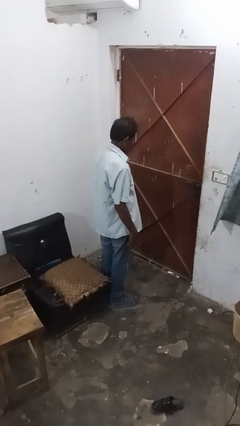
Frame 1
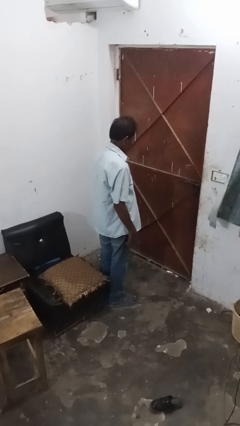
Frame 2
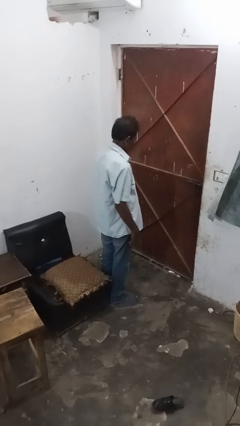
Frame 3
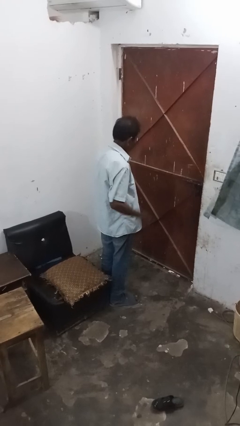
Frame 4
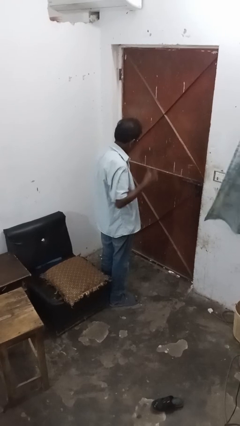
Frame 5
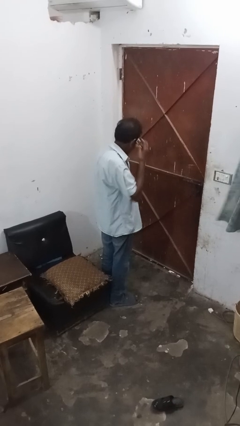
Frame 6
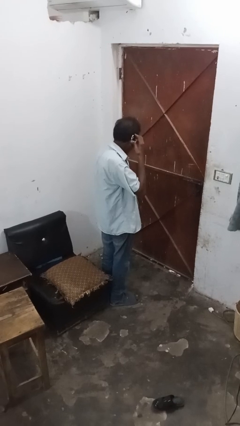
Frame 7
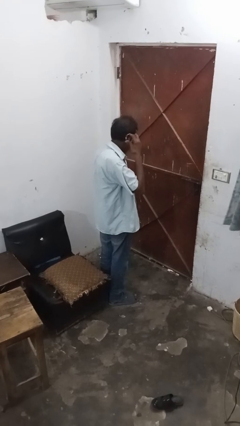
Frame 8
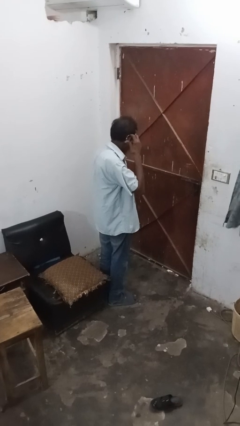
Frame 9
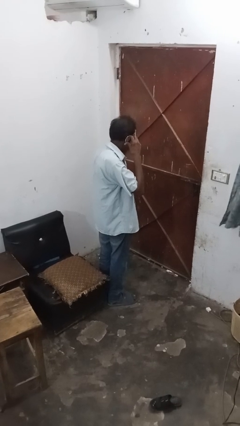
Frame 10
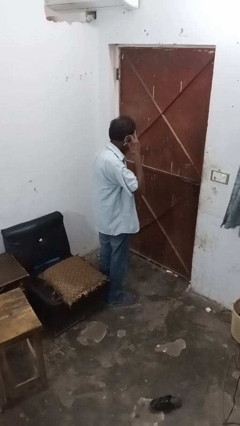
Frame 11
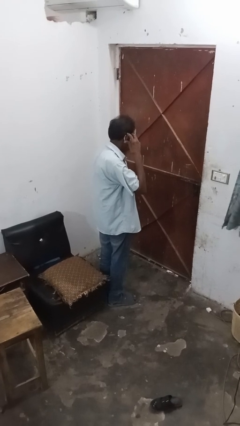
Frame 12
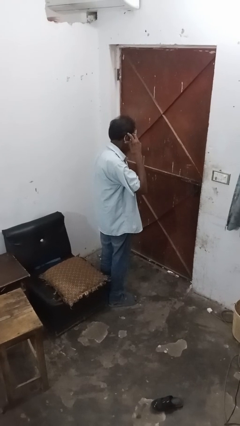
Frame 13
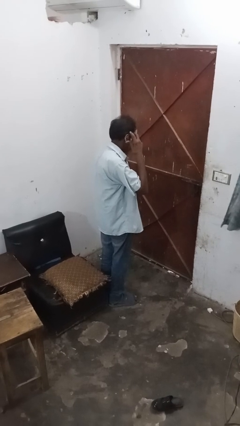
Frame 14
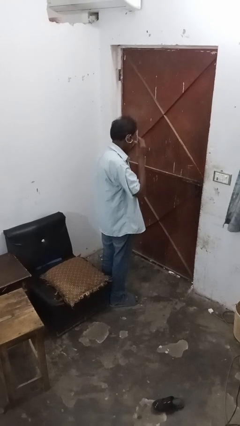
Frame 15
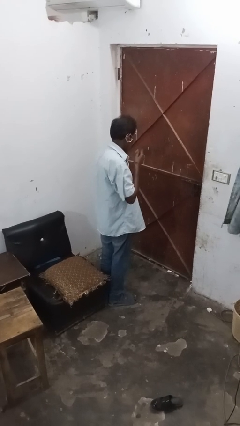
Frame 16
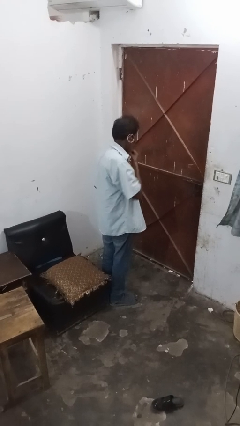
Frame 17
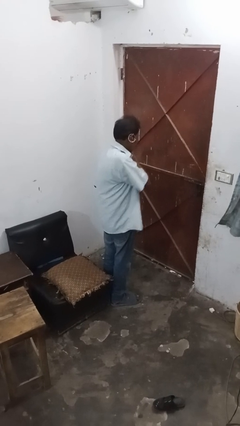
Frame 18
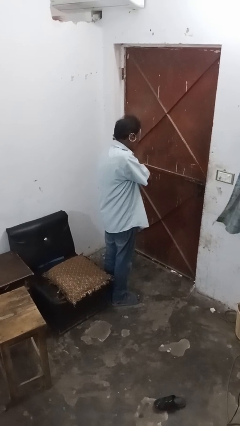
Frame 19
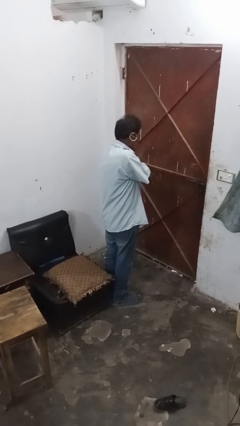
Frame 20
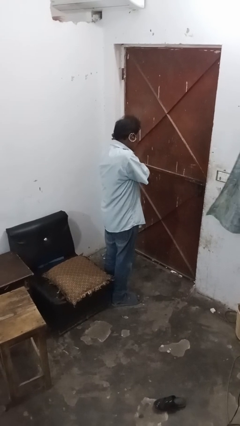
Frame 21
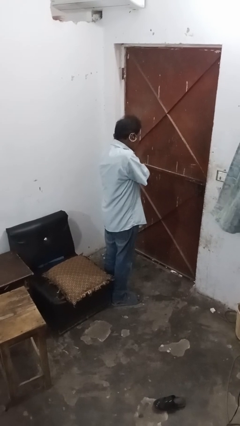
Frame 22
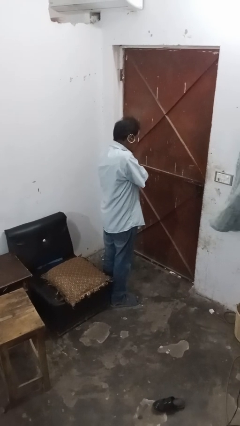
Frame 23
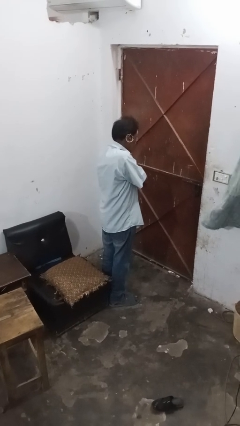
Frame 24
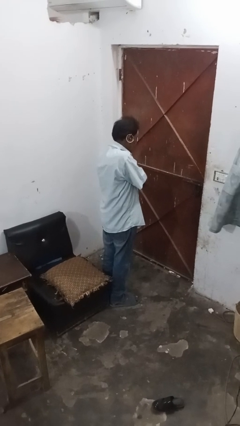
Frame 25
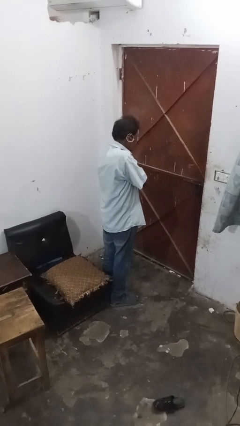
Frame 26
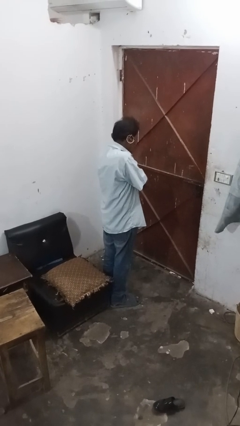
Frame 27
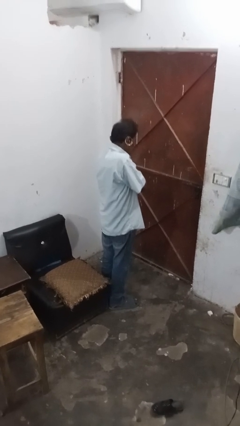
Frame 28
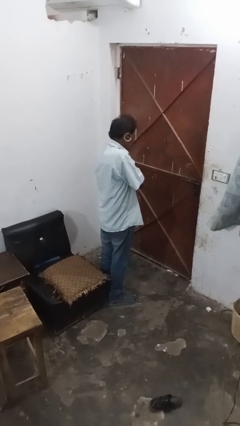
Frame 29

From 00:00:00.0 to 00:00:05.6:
person puts on earrings

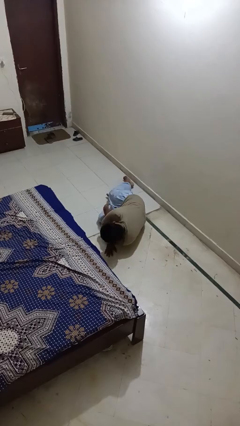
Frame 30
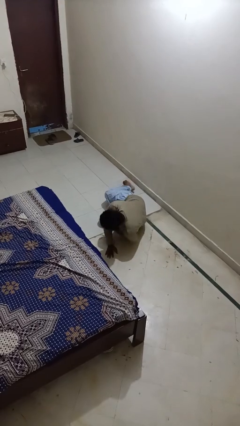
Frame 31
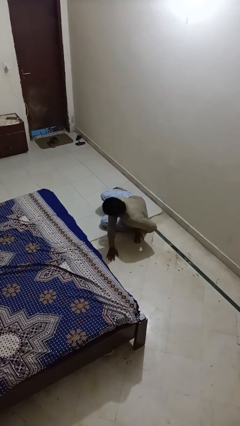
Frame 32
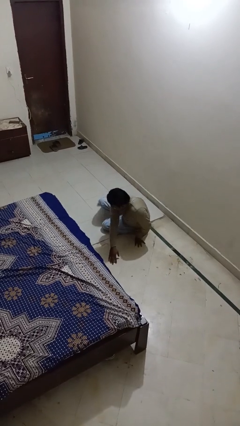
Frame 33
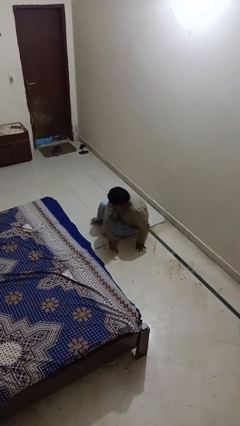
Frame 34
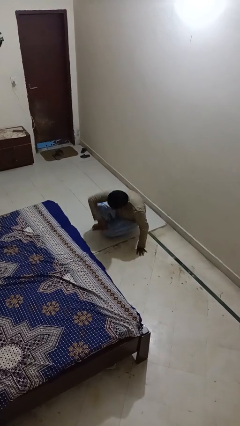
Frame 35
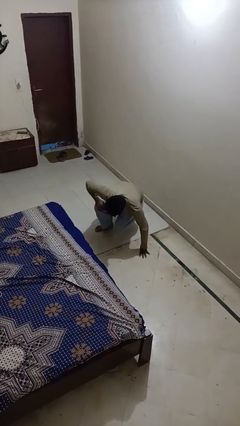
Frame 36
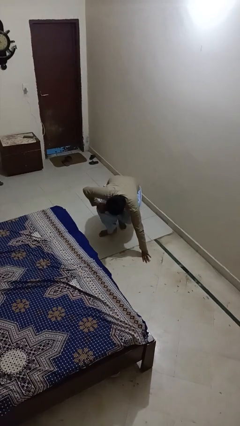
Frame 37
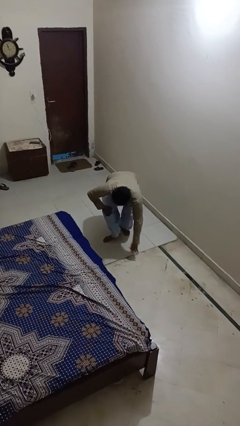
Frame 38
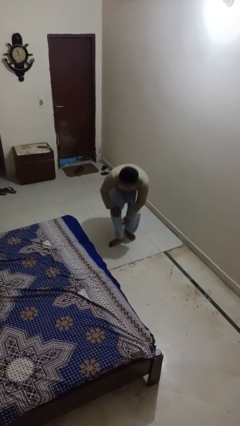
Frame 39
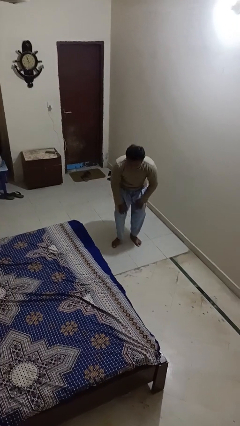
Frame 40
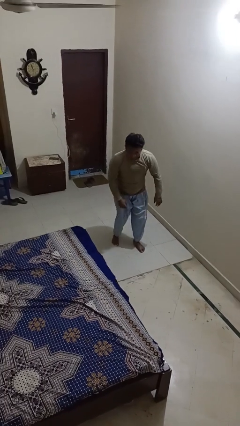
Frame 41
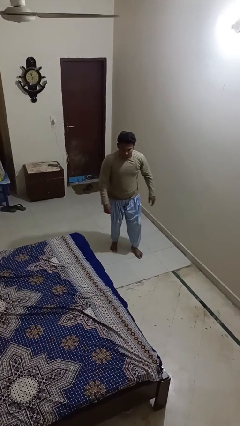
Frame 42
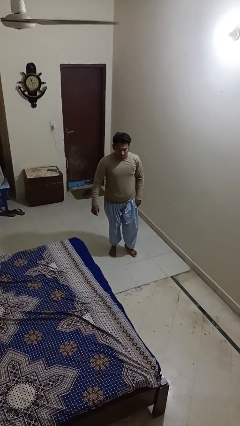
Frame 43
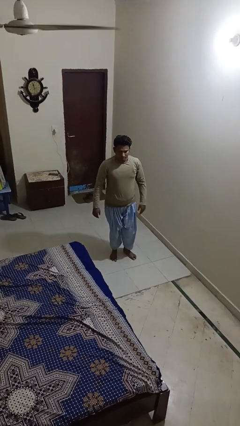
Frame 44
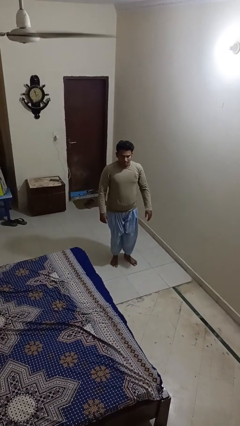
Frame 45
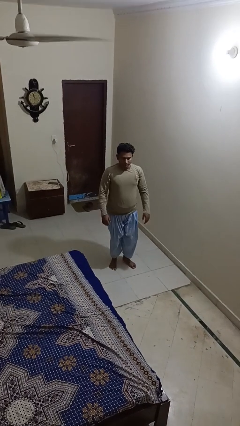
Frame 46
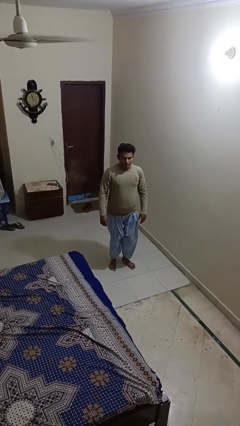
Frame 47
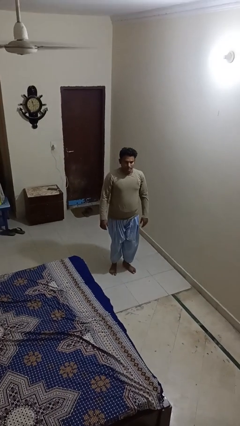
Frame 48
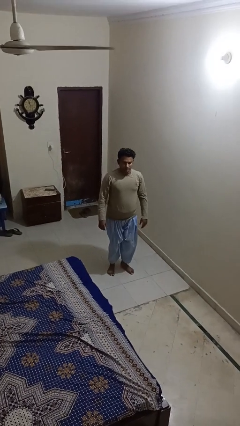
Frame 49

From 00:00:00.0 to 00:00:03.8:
person stands up from floor

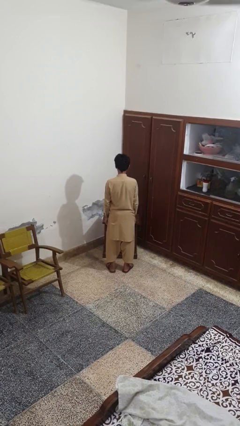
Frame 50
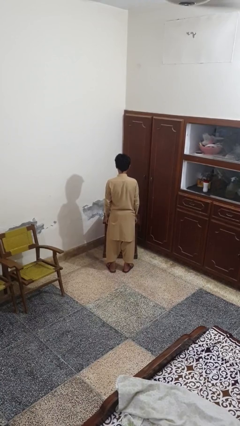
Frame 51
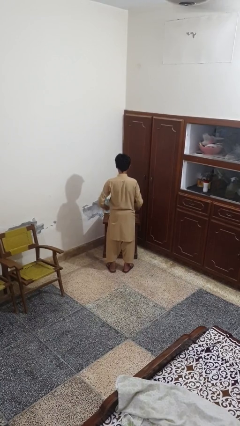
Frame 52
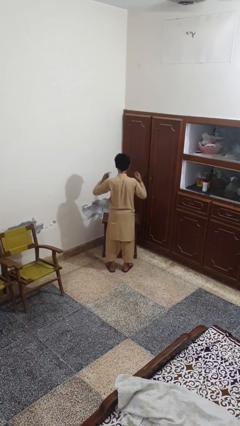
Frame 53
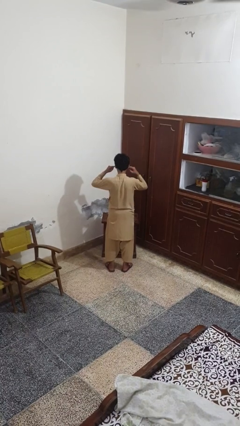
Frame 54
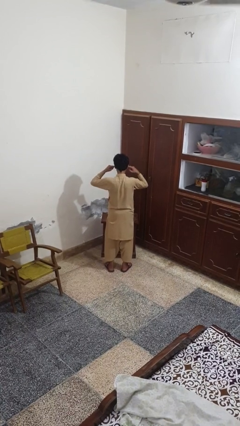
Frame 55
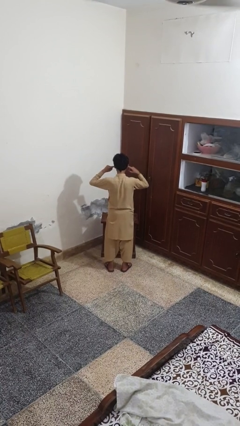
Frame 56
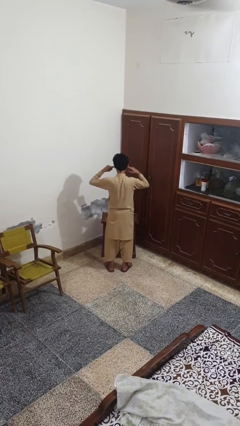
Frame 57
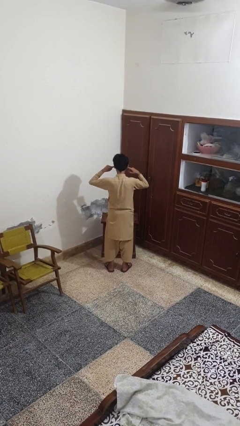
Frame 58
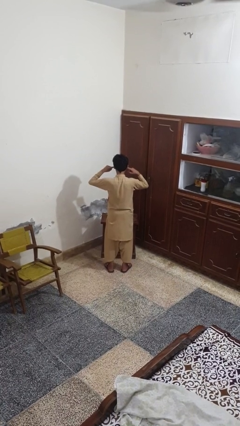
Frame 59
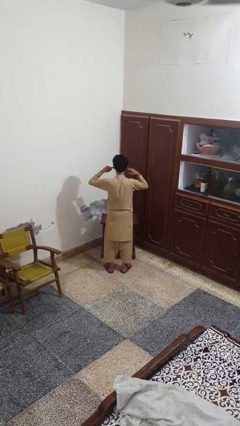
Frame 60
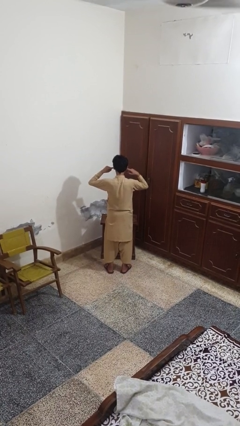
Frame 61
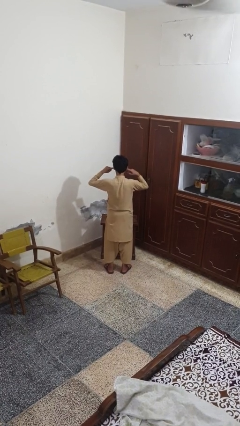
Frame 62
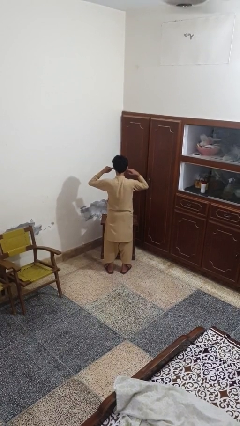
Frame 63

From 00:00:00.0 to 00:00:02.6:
person puts fingers in ear

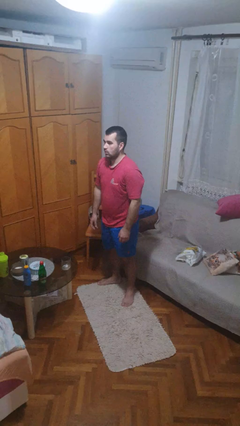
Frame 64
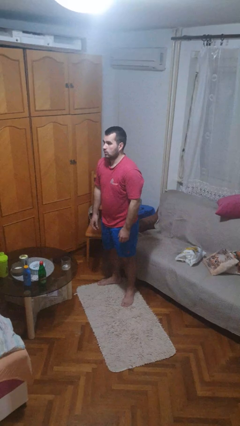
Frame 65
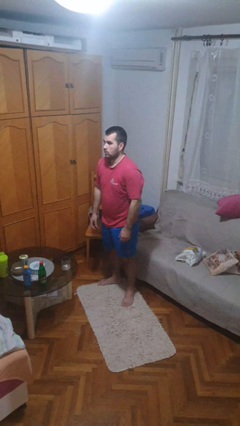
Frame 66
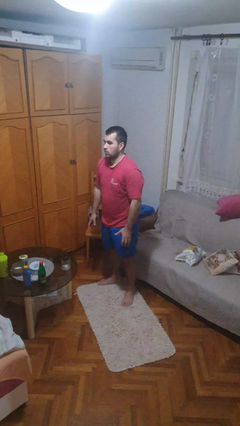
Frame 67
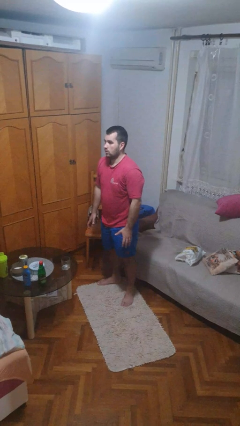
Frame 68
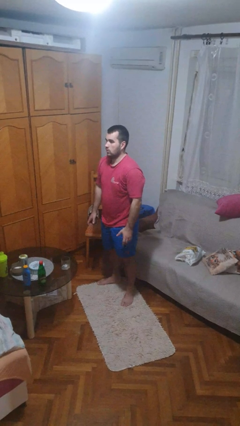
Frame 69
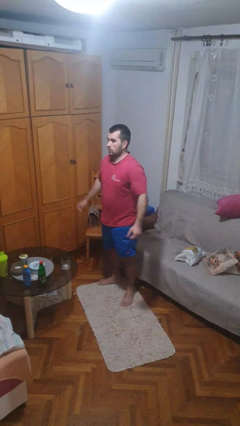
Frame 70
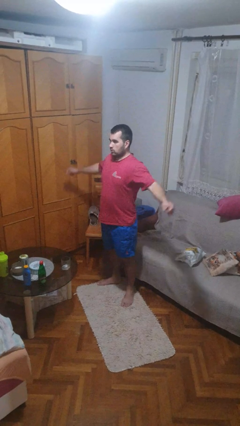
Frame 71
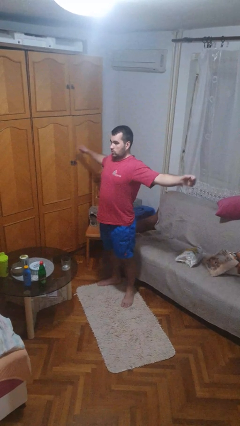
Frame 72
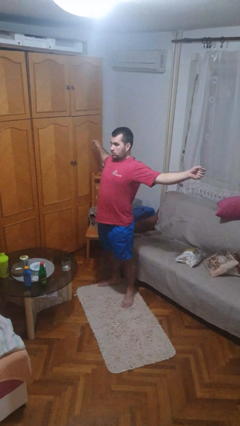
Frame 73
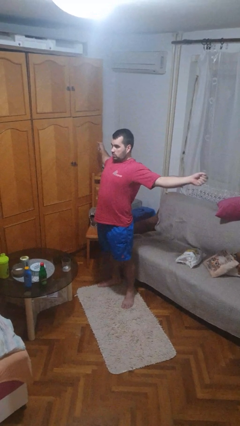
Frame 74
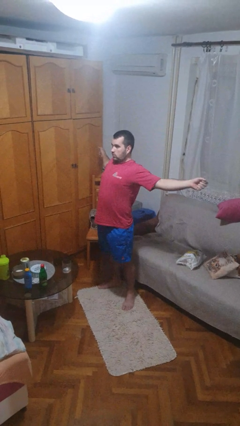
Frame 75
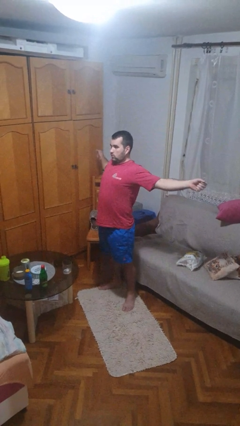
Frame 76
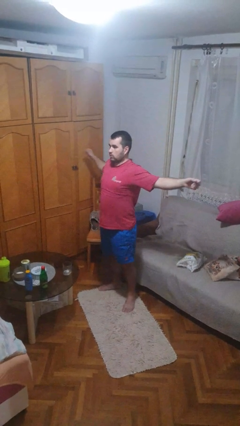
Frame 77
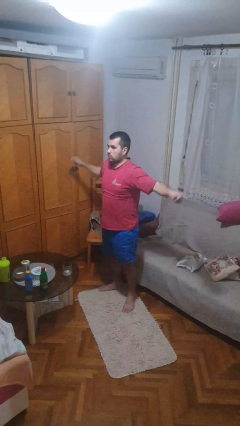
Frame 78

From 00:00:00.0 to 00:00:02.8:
person stretches arms to side

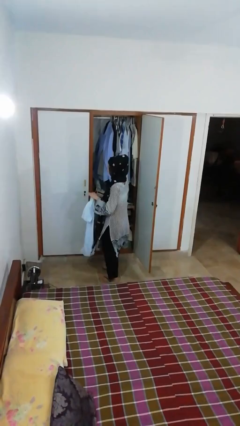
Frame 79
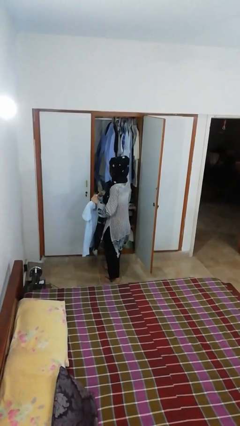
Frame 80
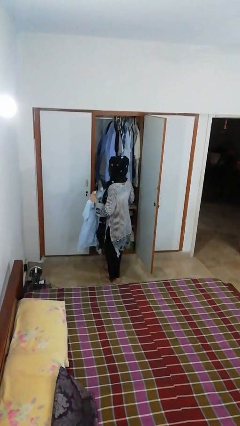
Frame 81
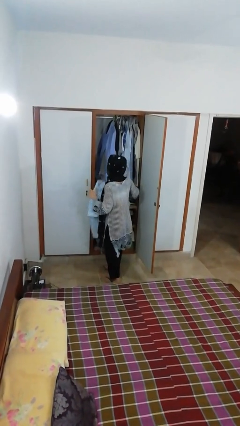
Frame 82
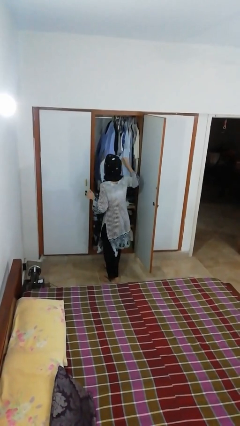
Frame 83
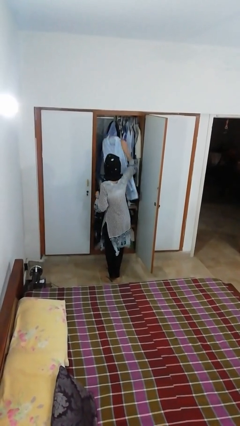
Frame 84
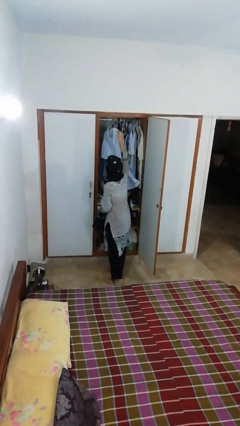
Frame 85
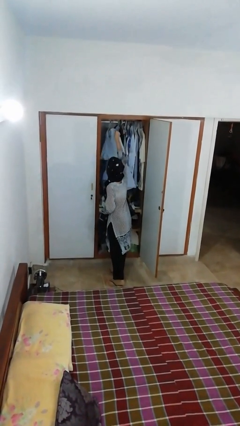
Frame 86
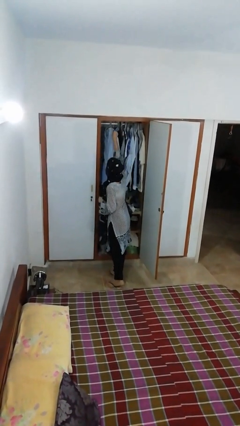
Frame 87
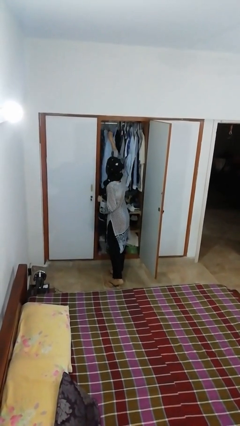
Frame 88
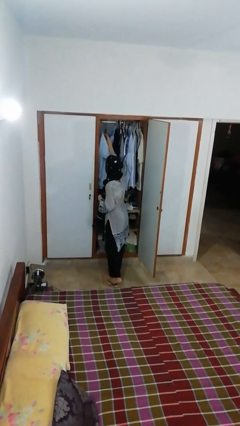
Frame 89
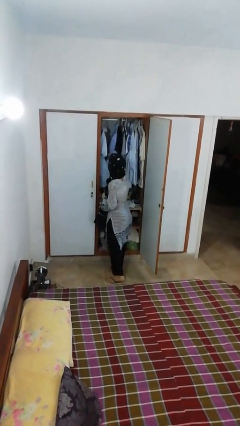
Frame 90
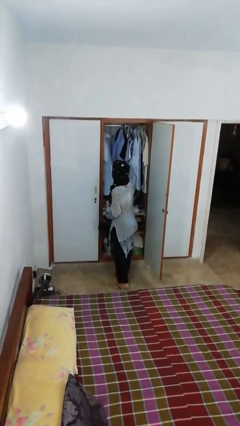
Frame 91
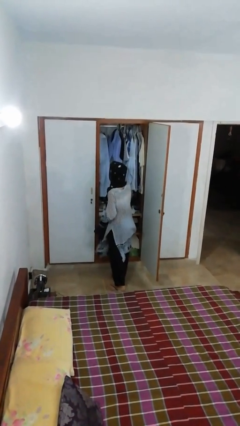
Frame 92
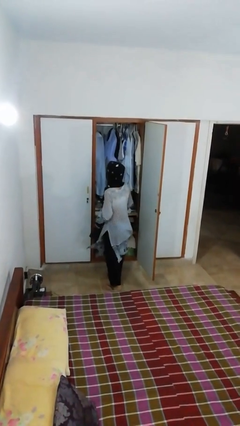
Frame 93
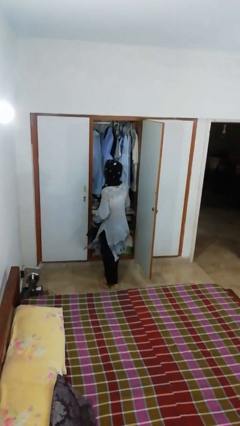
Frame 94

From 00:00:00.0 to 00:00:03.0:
person puts clothes into closet
